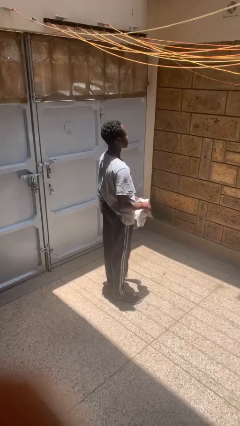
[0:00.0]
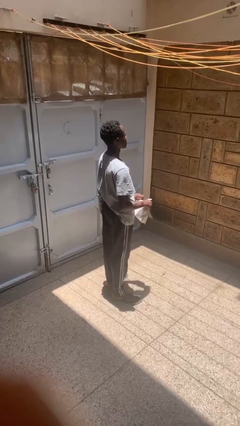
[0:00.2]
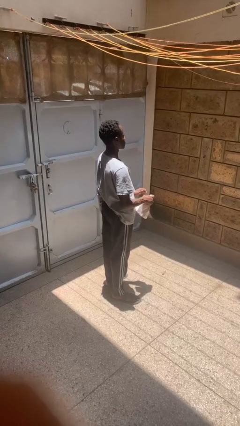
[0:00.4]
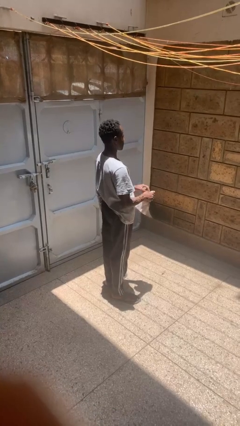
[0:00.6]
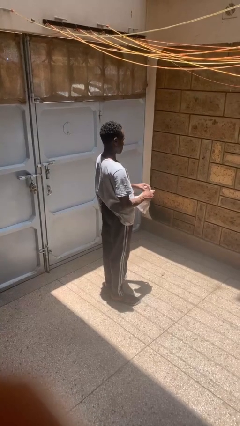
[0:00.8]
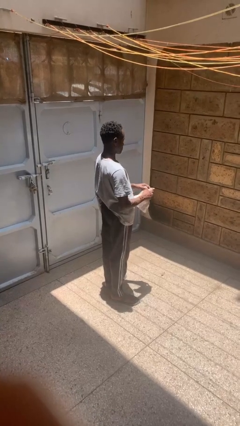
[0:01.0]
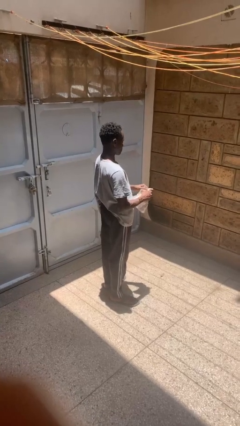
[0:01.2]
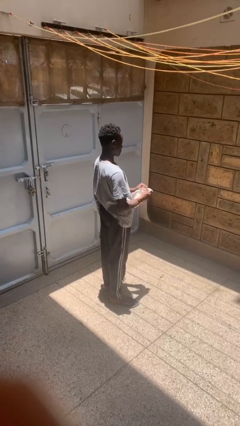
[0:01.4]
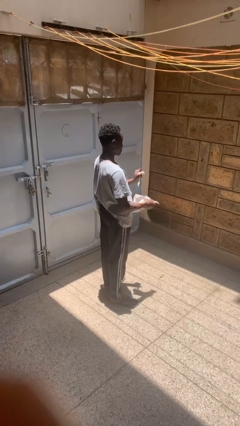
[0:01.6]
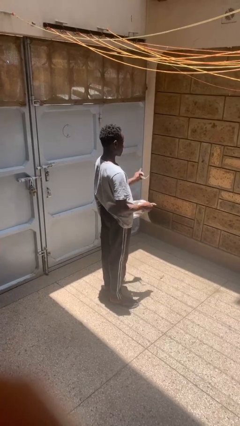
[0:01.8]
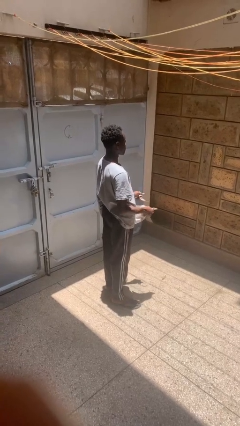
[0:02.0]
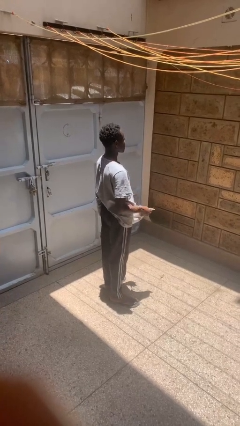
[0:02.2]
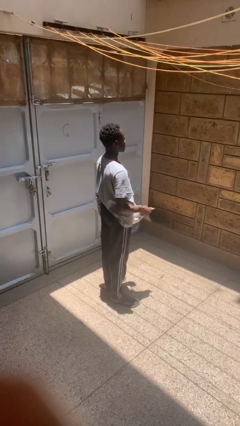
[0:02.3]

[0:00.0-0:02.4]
person tears paper

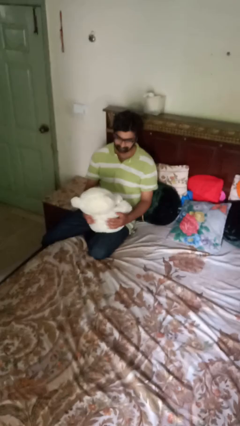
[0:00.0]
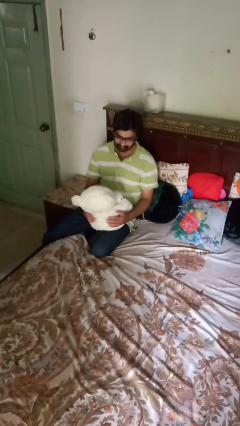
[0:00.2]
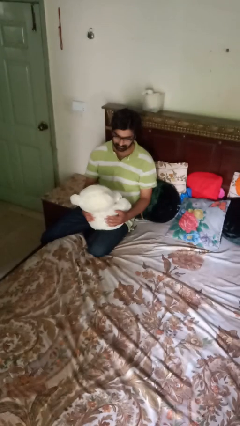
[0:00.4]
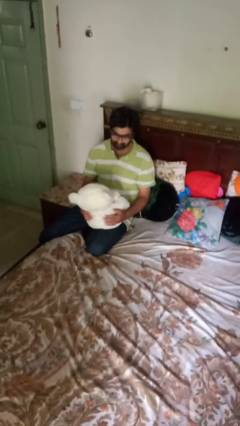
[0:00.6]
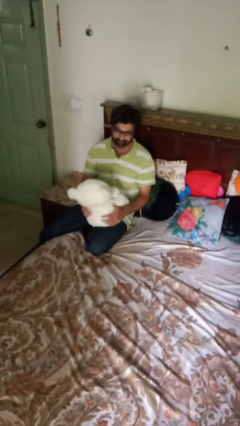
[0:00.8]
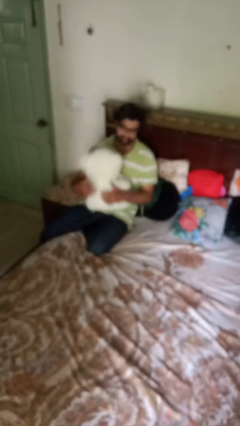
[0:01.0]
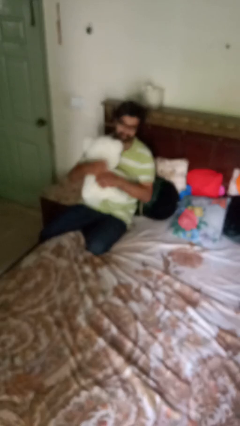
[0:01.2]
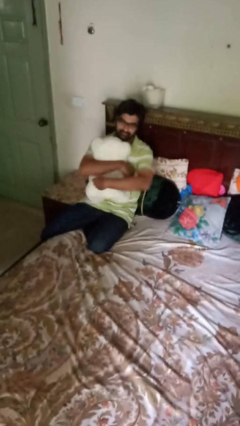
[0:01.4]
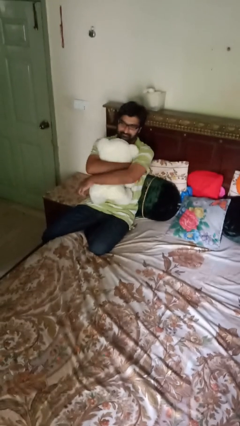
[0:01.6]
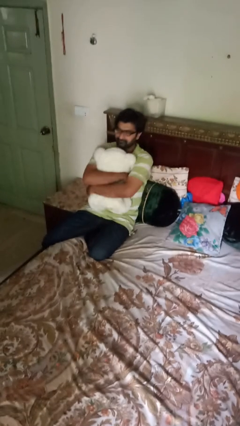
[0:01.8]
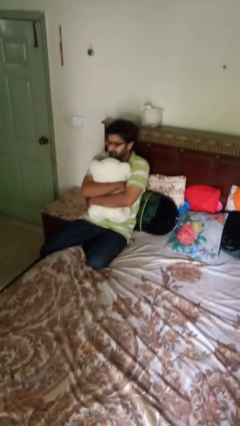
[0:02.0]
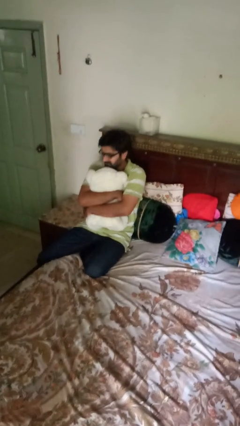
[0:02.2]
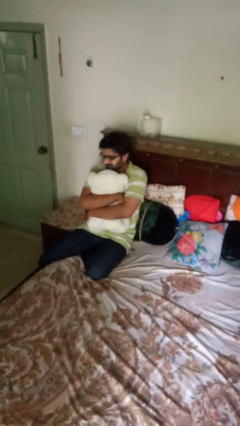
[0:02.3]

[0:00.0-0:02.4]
person hugs stuffed animal

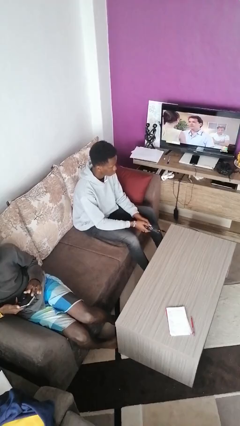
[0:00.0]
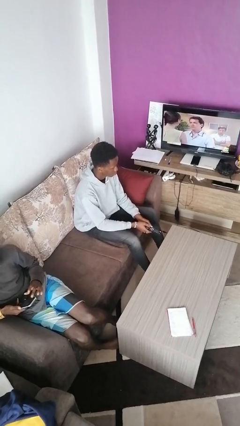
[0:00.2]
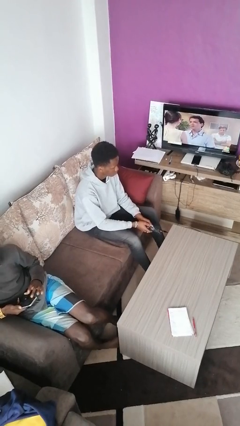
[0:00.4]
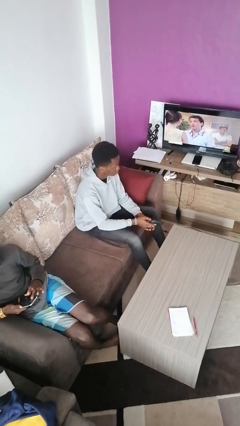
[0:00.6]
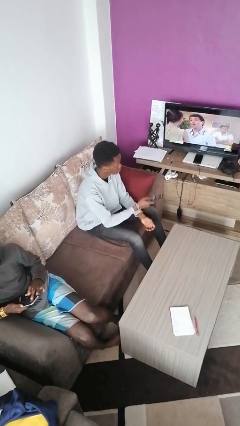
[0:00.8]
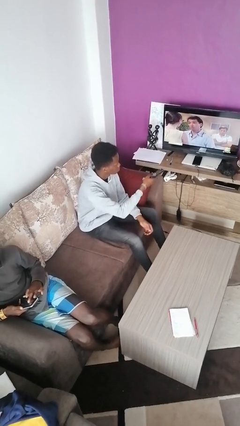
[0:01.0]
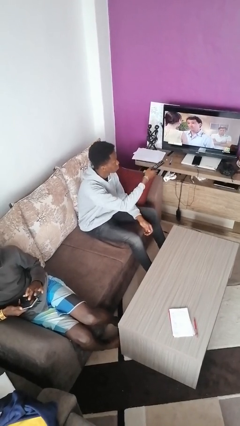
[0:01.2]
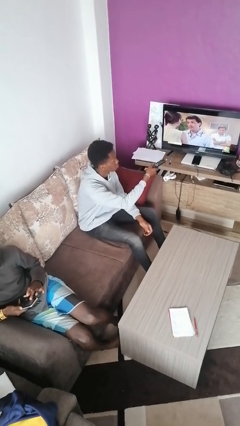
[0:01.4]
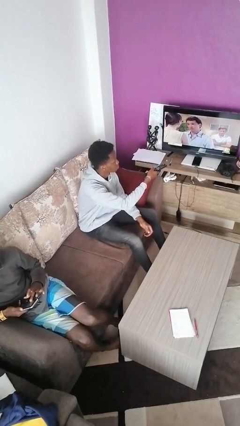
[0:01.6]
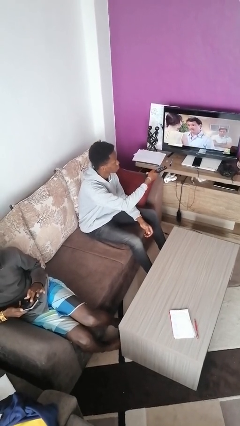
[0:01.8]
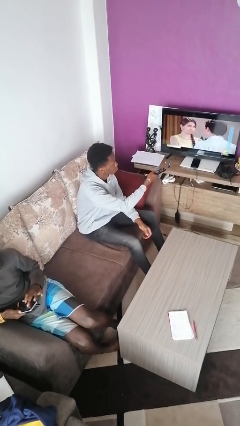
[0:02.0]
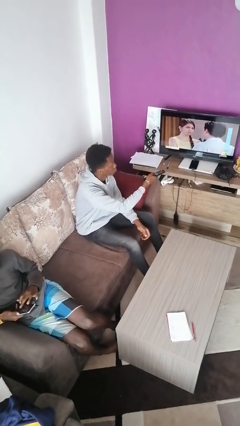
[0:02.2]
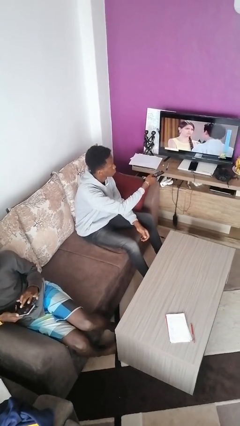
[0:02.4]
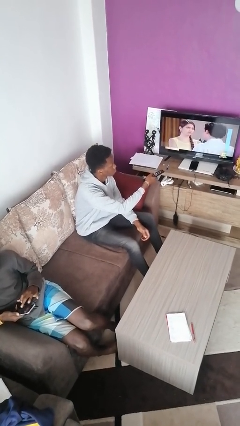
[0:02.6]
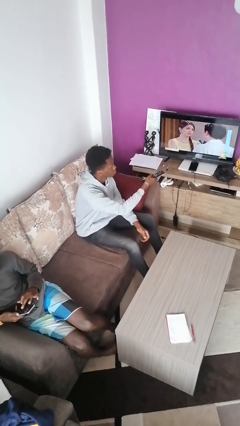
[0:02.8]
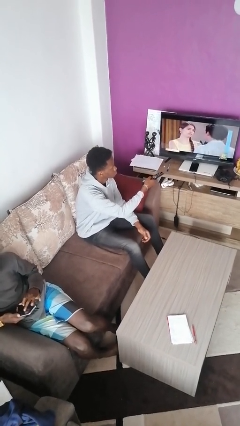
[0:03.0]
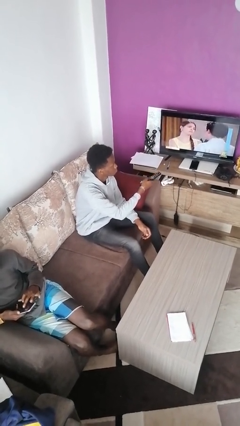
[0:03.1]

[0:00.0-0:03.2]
person uses television remote

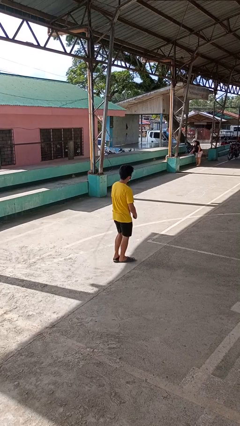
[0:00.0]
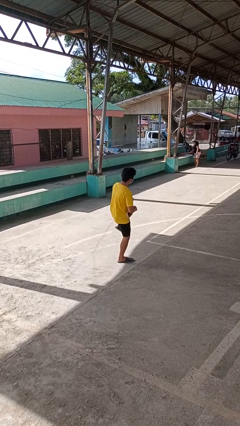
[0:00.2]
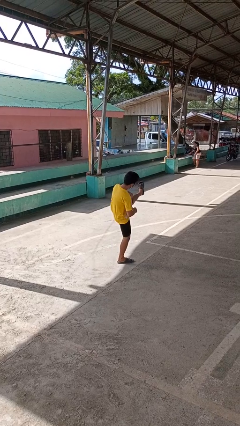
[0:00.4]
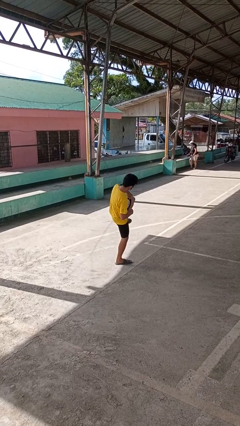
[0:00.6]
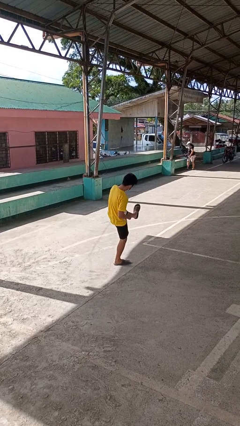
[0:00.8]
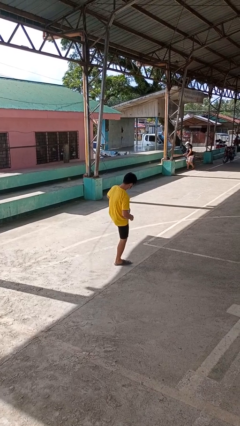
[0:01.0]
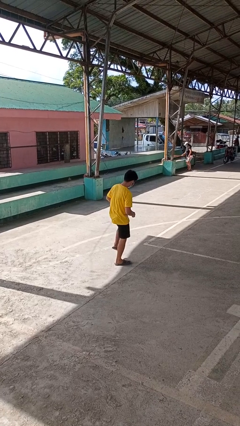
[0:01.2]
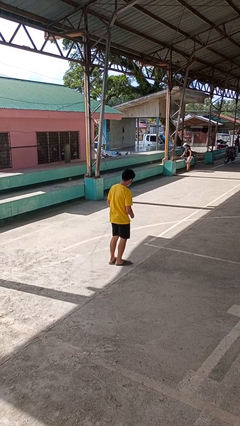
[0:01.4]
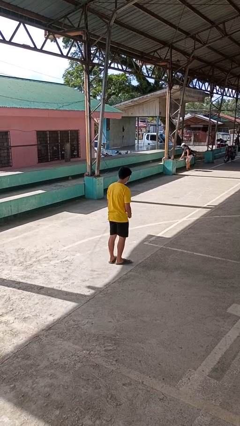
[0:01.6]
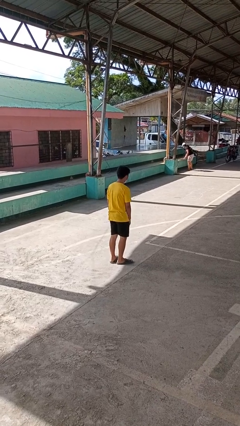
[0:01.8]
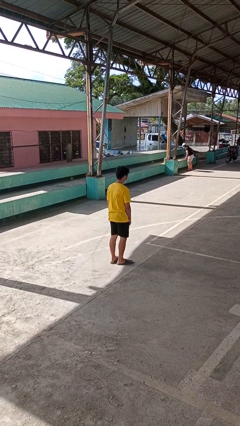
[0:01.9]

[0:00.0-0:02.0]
person karate kicks

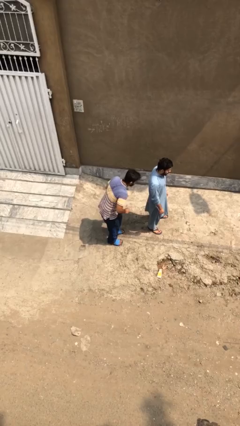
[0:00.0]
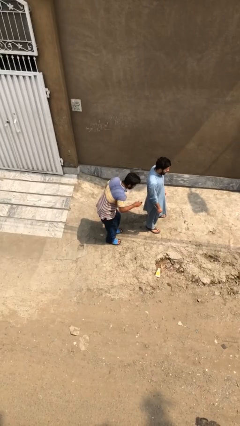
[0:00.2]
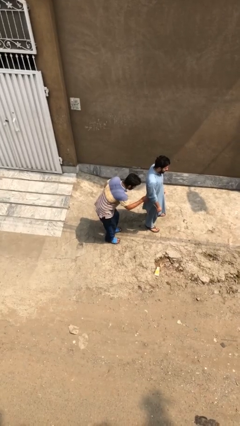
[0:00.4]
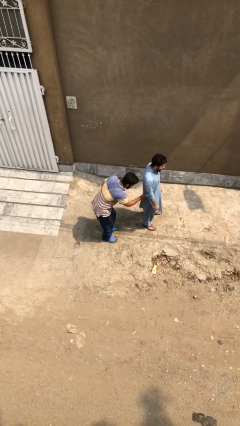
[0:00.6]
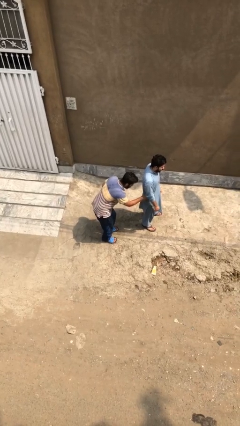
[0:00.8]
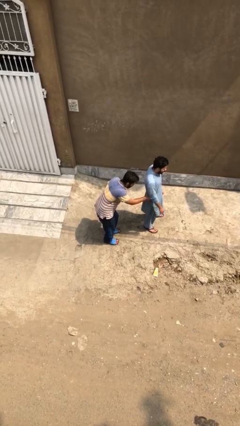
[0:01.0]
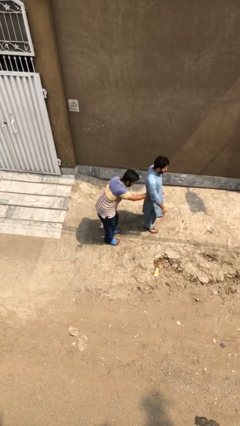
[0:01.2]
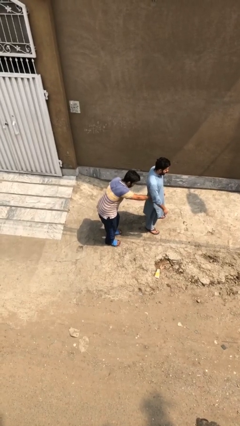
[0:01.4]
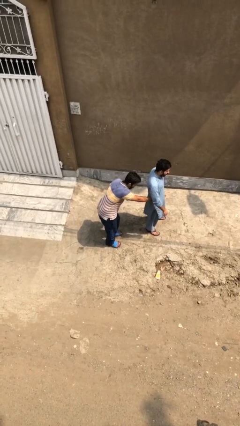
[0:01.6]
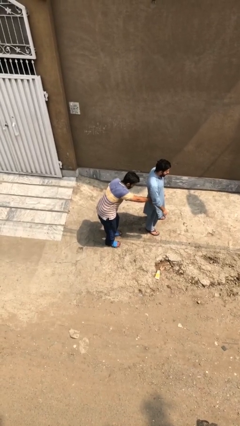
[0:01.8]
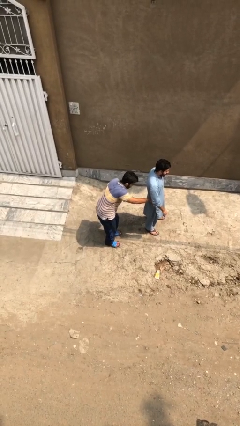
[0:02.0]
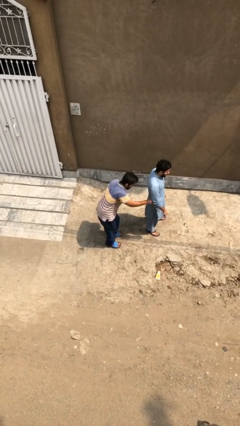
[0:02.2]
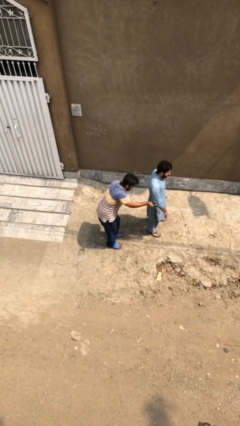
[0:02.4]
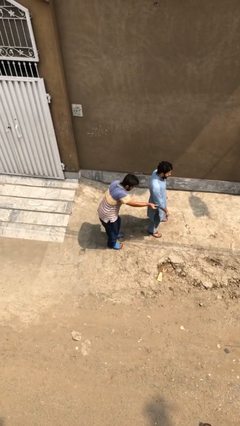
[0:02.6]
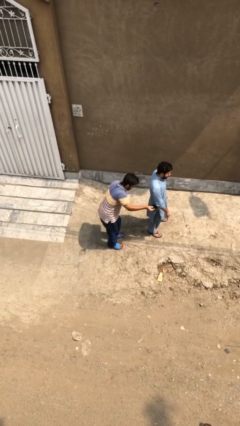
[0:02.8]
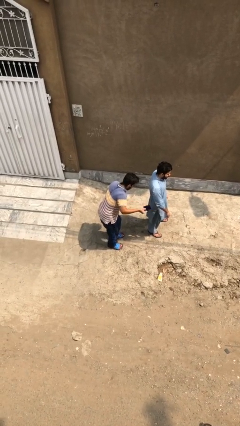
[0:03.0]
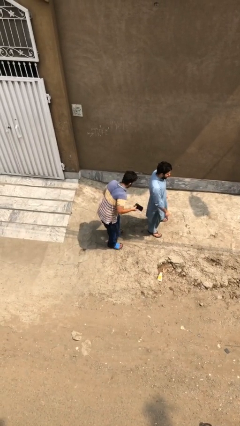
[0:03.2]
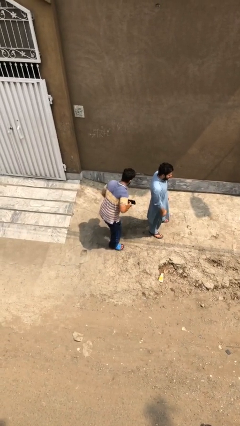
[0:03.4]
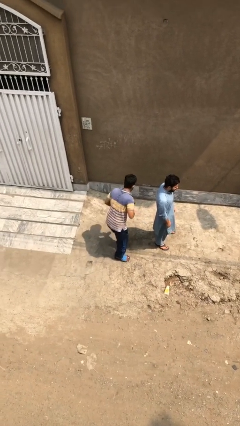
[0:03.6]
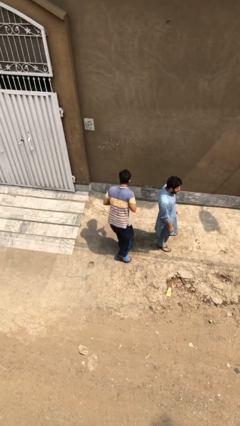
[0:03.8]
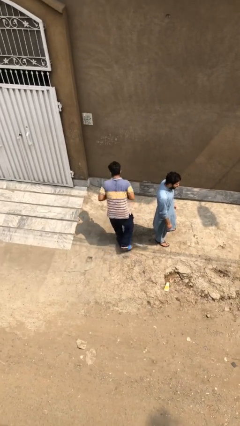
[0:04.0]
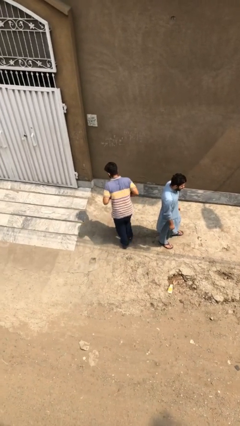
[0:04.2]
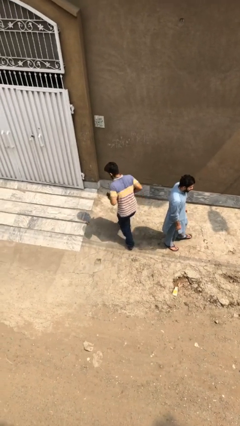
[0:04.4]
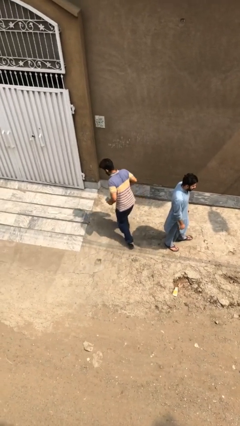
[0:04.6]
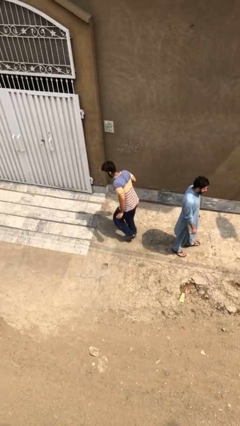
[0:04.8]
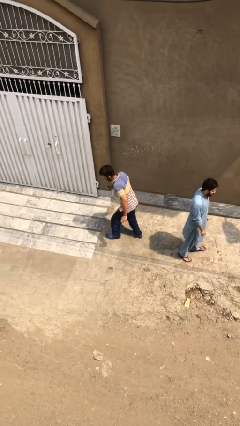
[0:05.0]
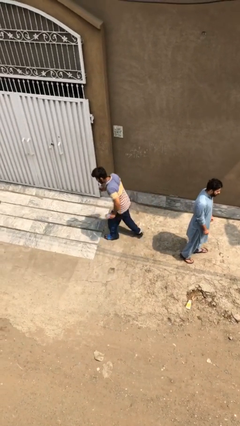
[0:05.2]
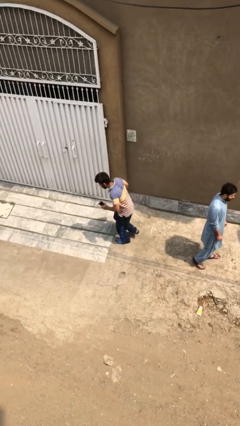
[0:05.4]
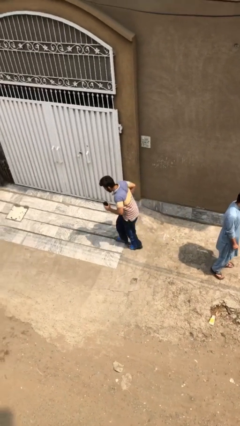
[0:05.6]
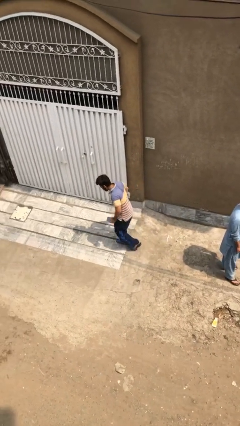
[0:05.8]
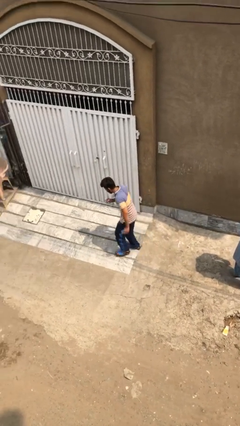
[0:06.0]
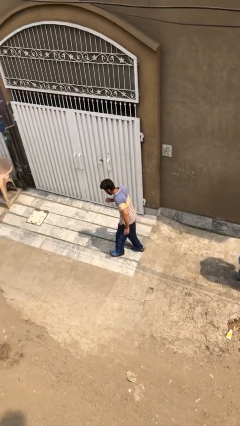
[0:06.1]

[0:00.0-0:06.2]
person steals object from person

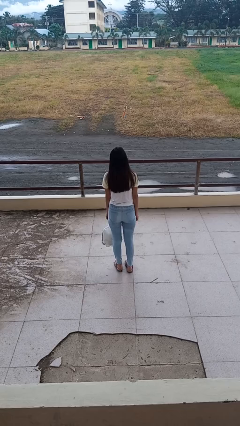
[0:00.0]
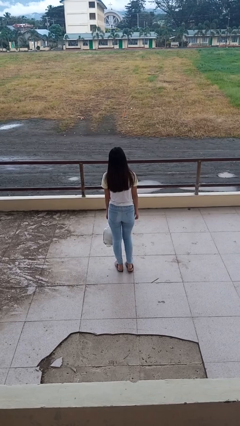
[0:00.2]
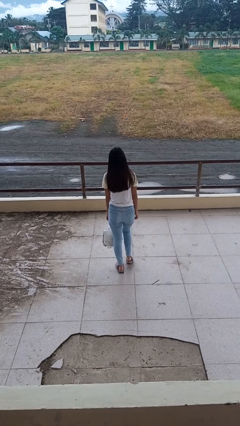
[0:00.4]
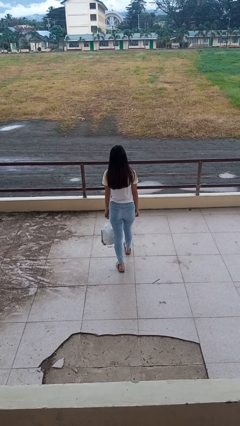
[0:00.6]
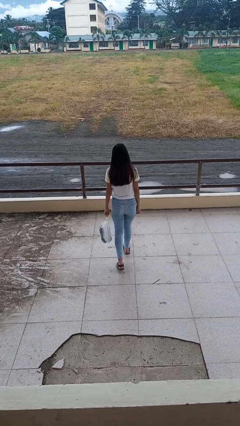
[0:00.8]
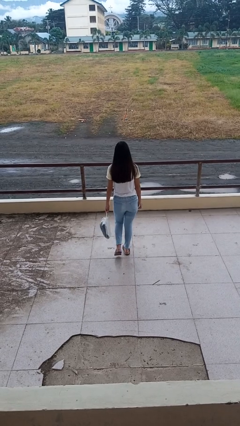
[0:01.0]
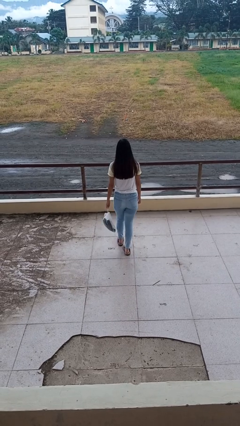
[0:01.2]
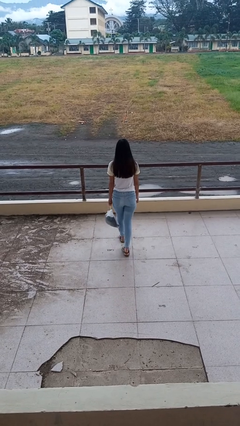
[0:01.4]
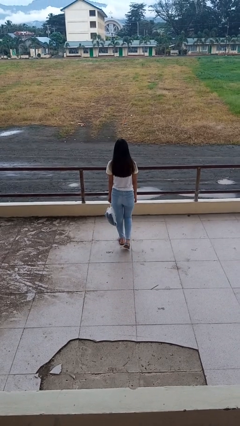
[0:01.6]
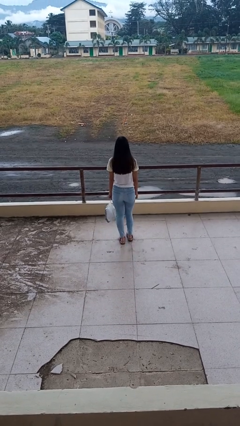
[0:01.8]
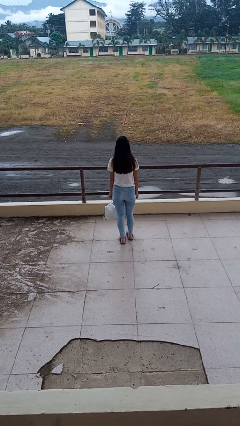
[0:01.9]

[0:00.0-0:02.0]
person carries groceries
